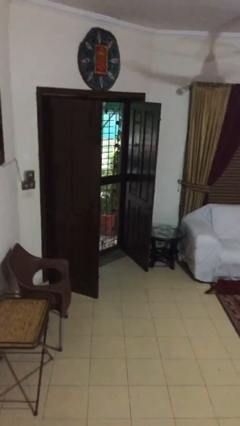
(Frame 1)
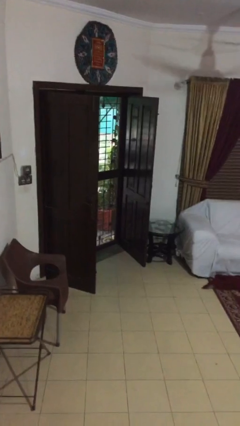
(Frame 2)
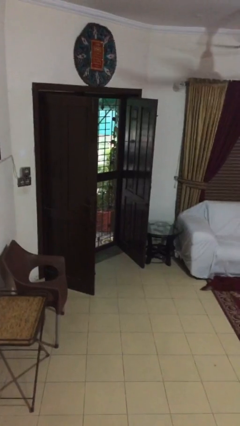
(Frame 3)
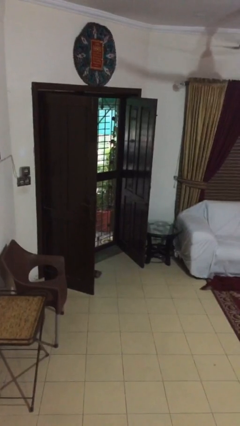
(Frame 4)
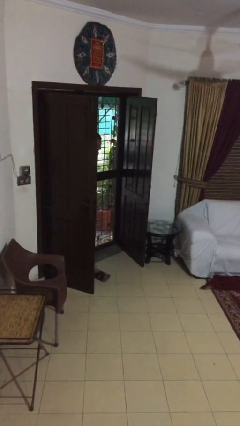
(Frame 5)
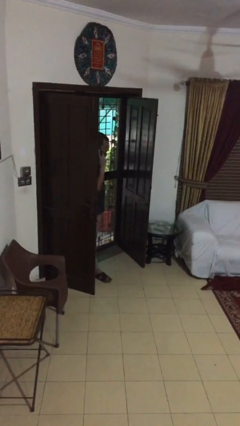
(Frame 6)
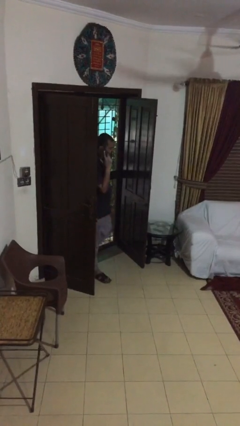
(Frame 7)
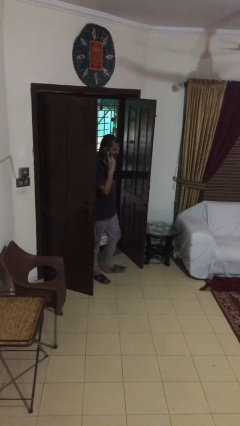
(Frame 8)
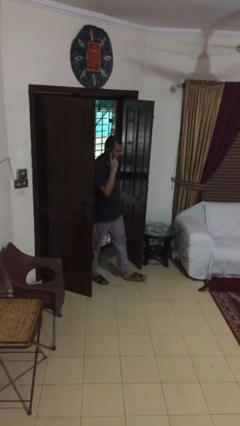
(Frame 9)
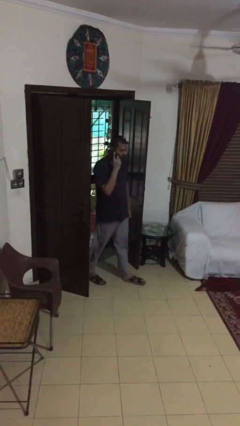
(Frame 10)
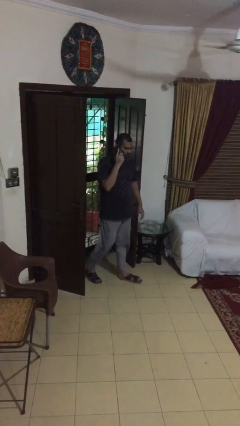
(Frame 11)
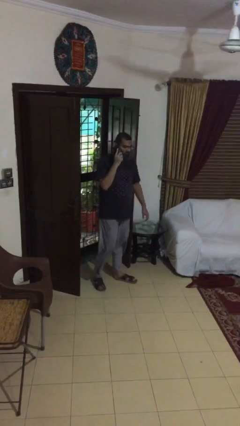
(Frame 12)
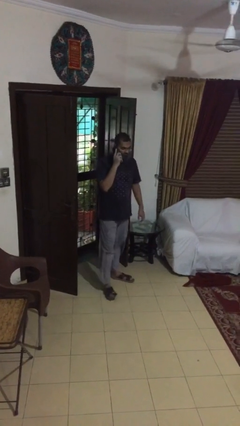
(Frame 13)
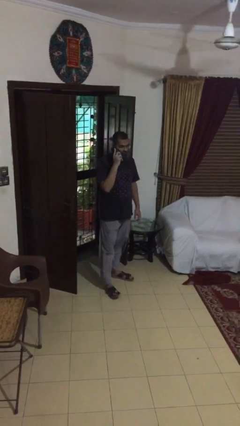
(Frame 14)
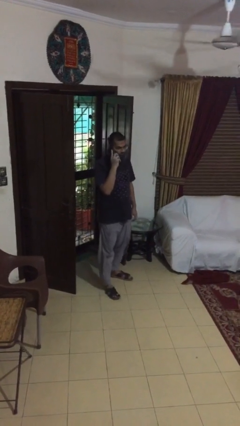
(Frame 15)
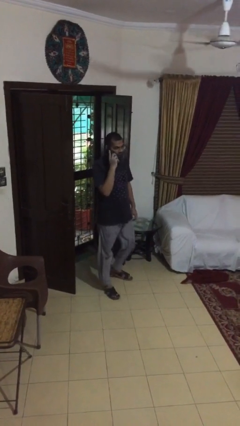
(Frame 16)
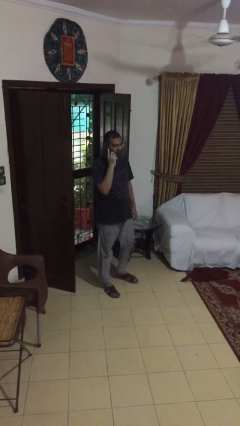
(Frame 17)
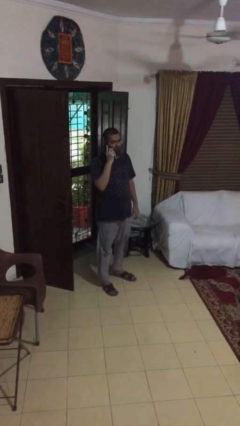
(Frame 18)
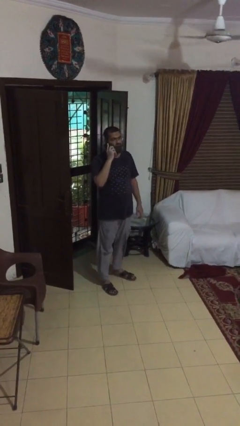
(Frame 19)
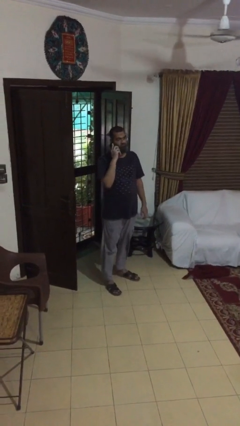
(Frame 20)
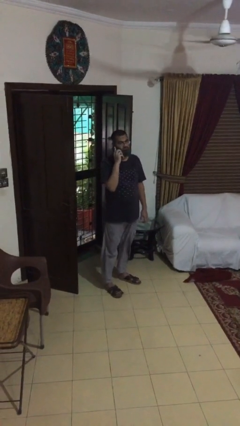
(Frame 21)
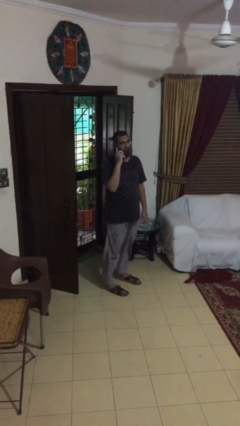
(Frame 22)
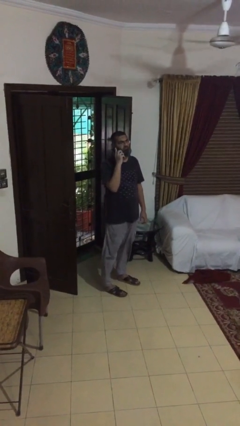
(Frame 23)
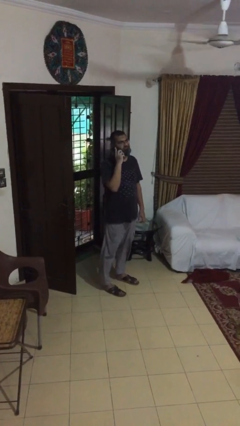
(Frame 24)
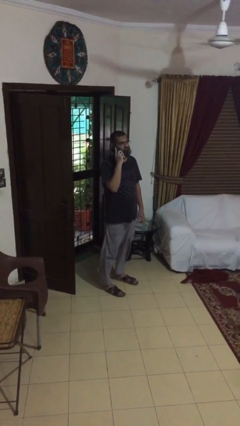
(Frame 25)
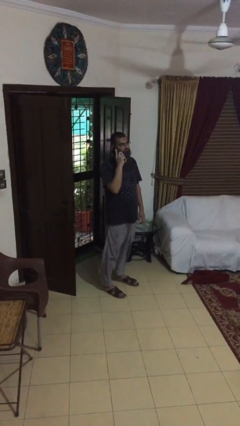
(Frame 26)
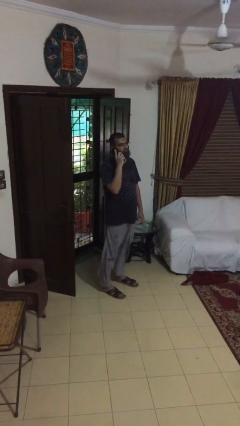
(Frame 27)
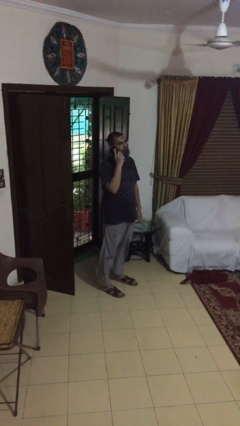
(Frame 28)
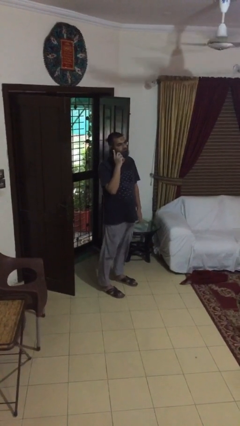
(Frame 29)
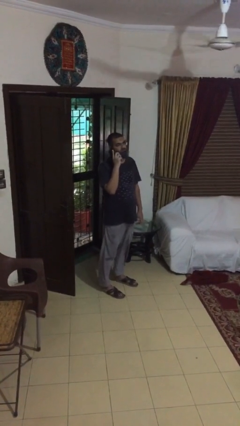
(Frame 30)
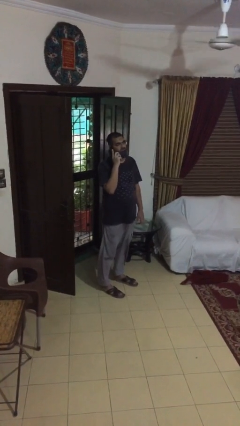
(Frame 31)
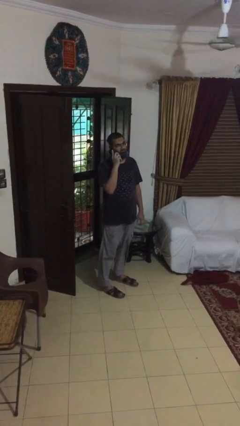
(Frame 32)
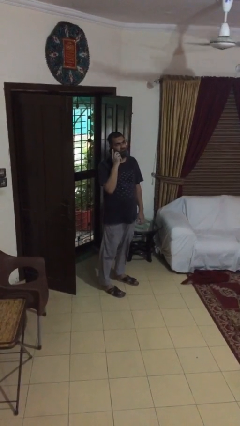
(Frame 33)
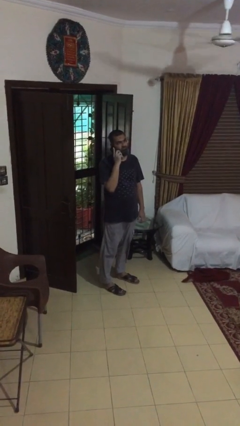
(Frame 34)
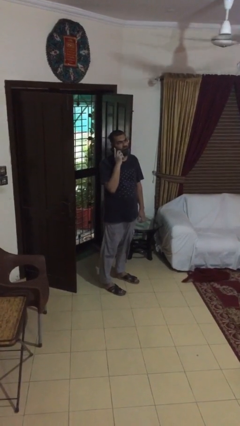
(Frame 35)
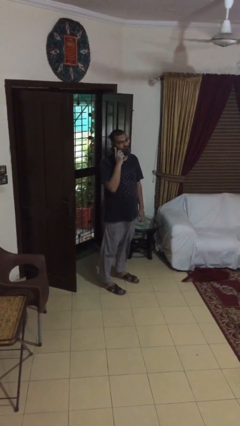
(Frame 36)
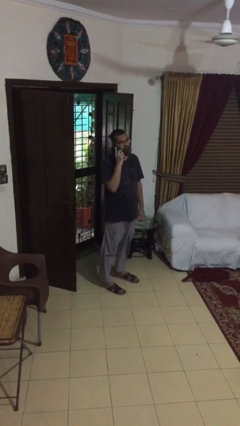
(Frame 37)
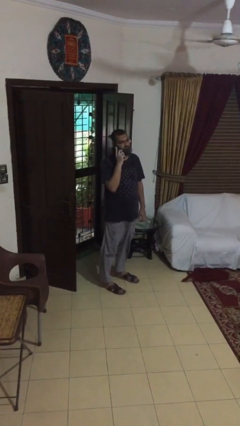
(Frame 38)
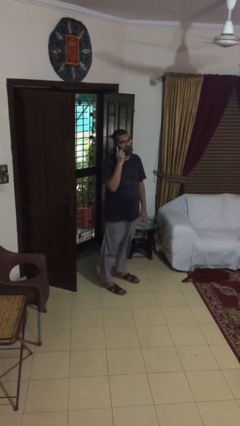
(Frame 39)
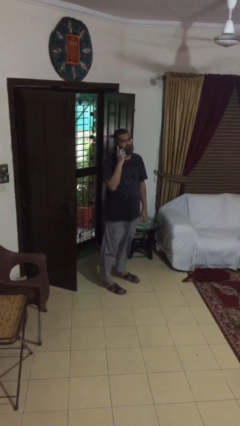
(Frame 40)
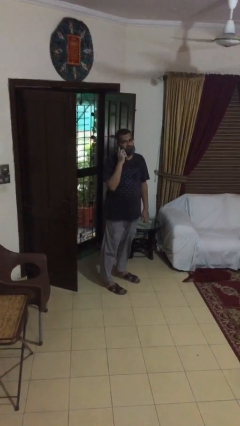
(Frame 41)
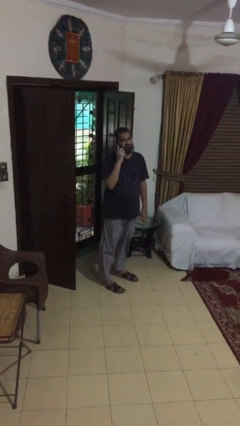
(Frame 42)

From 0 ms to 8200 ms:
person enters scene through structure

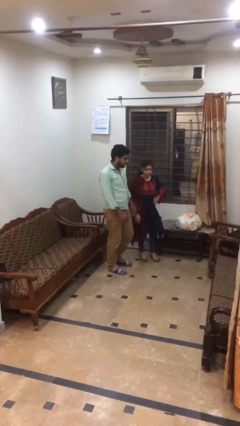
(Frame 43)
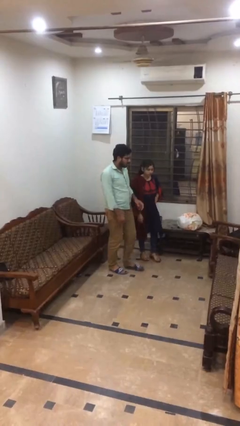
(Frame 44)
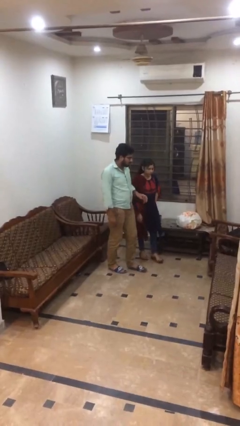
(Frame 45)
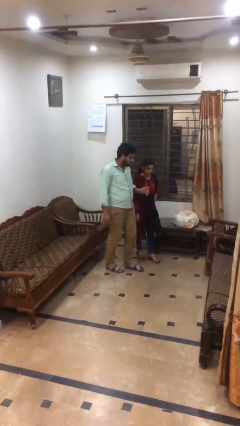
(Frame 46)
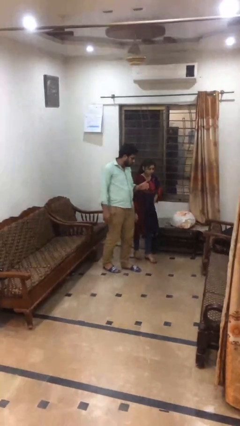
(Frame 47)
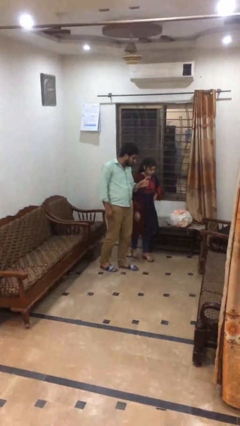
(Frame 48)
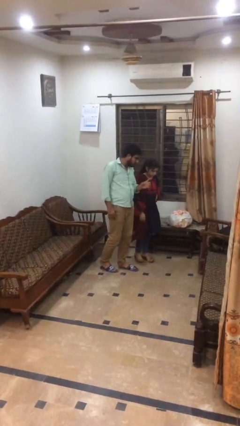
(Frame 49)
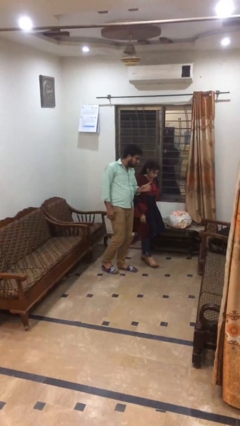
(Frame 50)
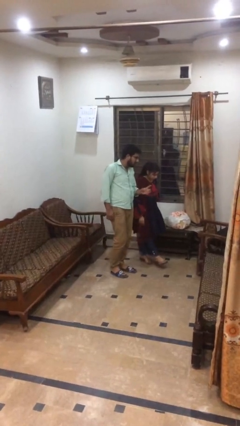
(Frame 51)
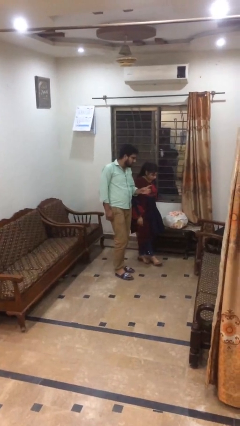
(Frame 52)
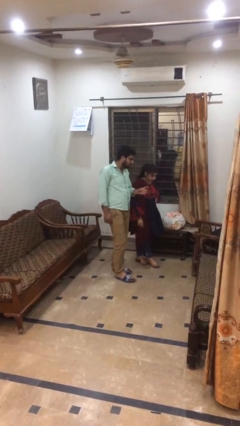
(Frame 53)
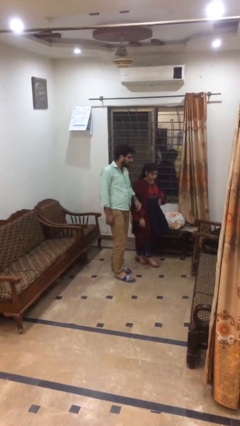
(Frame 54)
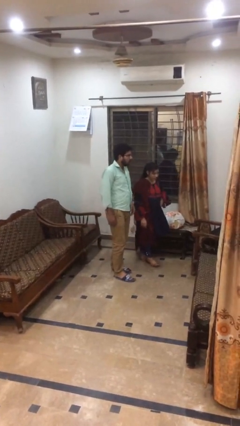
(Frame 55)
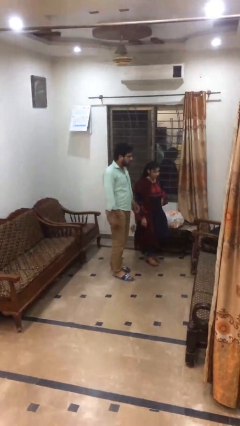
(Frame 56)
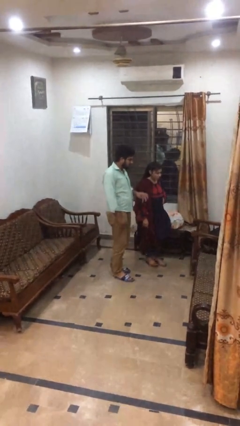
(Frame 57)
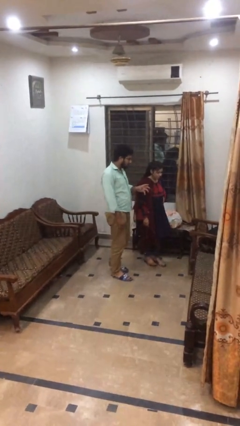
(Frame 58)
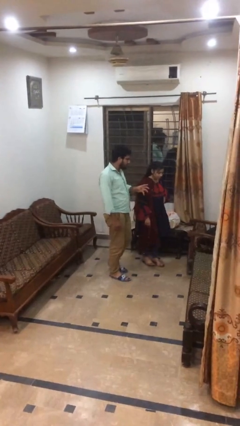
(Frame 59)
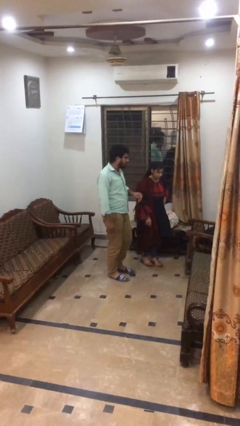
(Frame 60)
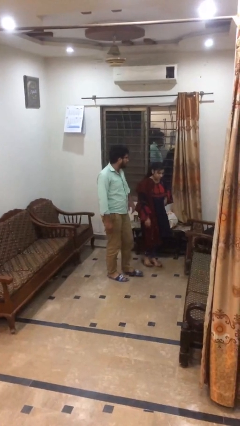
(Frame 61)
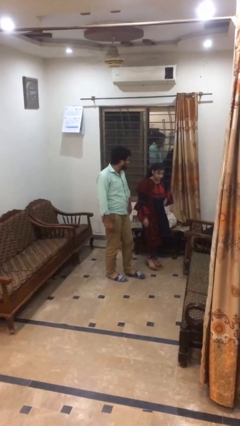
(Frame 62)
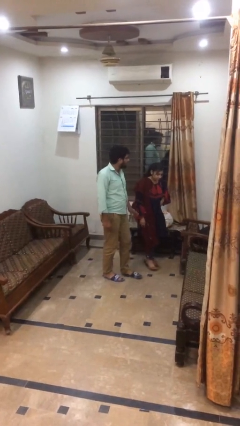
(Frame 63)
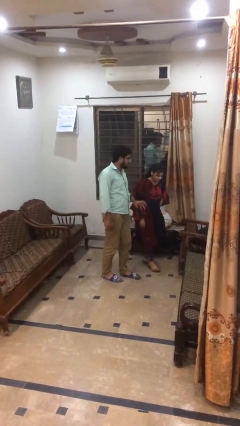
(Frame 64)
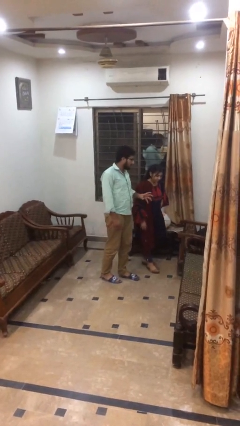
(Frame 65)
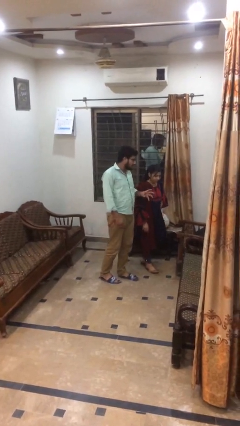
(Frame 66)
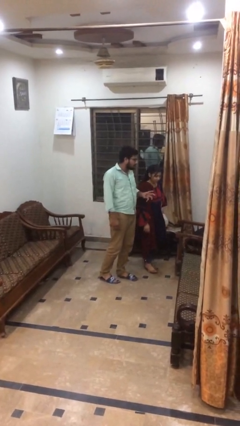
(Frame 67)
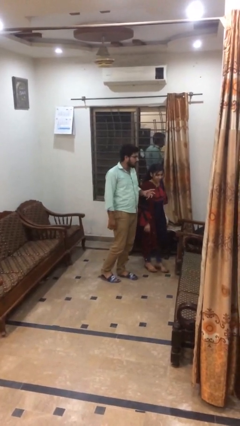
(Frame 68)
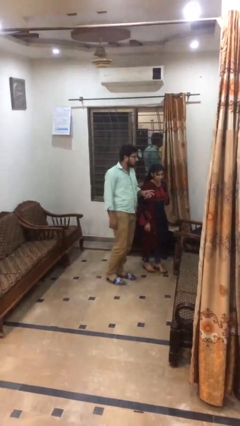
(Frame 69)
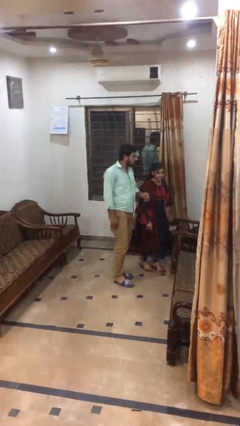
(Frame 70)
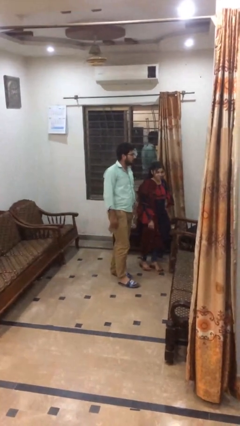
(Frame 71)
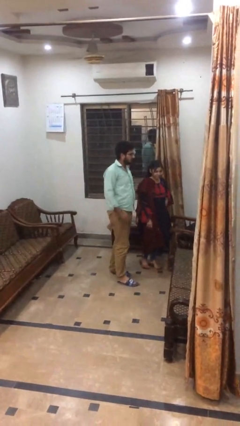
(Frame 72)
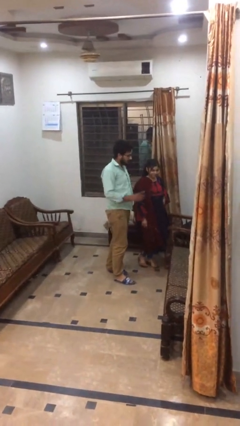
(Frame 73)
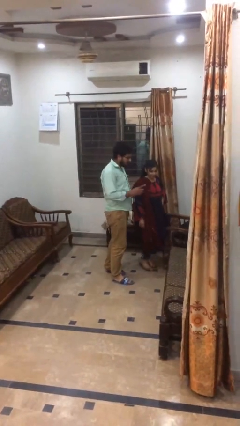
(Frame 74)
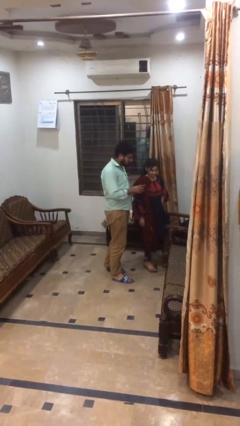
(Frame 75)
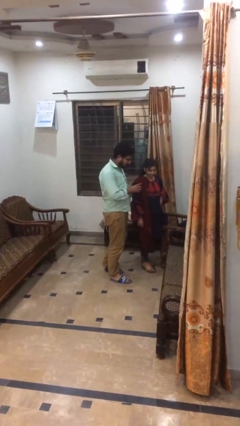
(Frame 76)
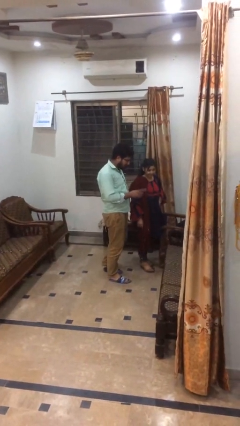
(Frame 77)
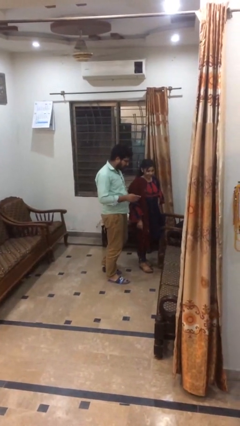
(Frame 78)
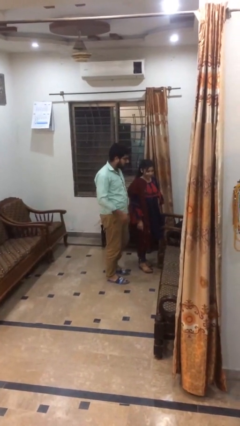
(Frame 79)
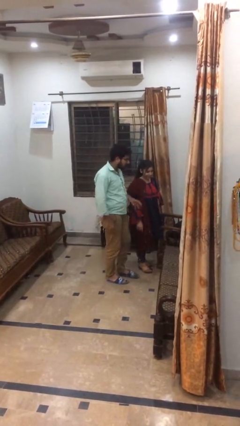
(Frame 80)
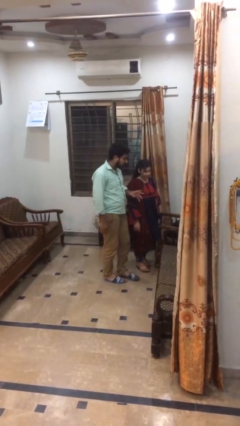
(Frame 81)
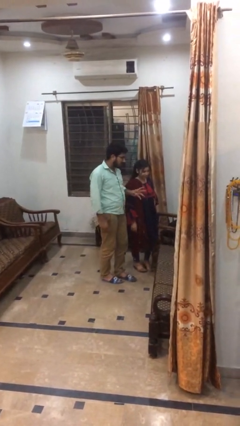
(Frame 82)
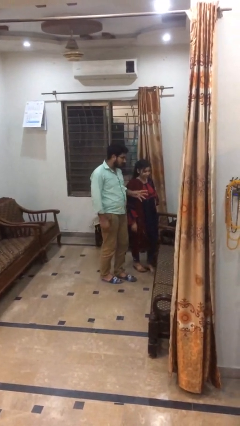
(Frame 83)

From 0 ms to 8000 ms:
person talks to person

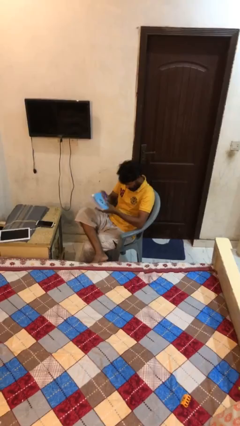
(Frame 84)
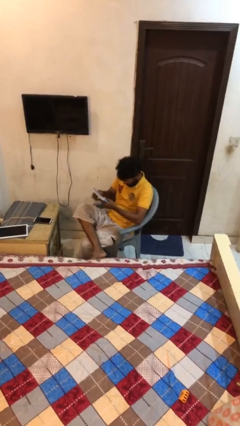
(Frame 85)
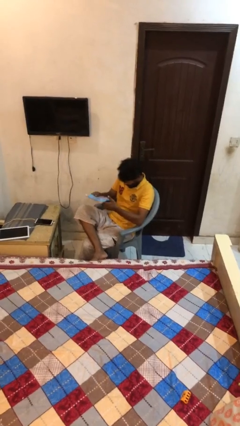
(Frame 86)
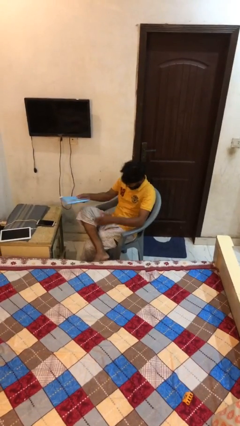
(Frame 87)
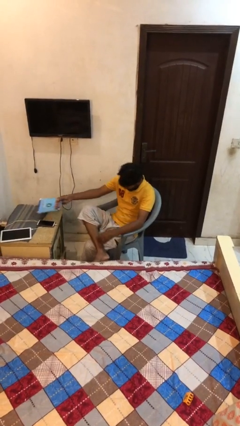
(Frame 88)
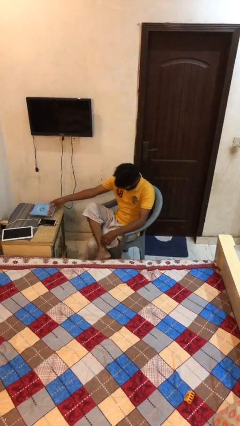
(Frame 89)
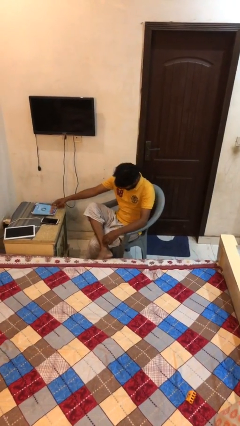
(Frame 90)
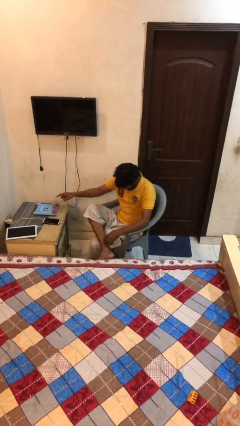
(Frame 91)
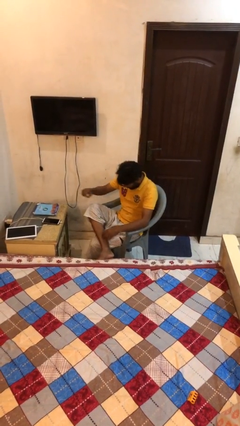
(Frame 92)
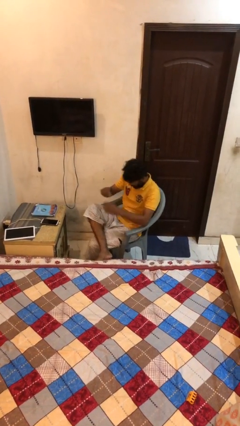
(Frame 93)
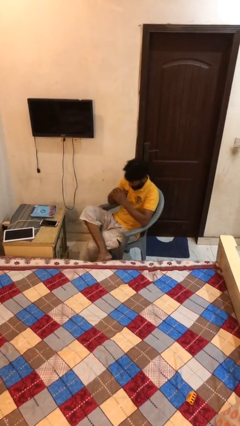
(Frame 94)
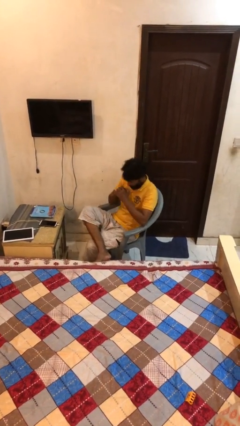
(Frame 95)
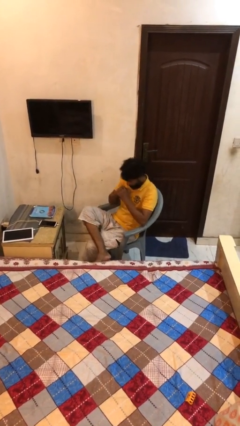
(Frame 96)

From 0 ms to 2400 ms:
person puts down object on table
